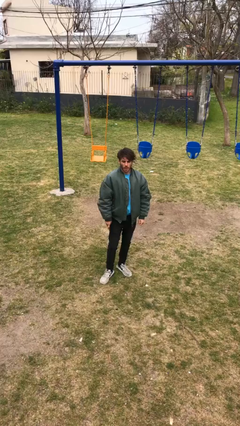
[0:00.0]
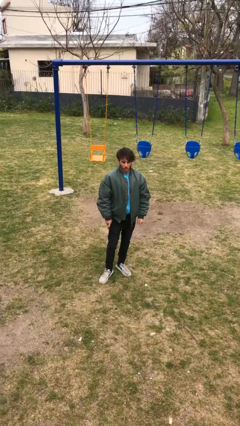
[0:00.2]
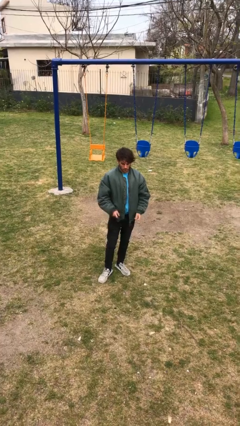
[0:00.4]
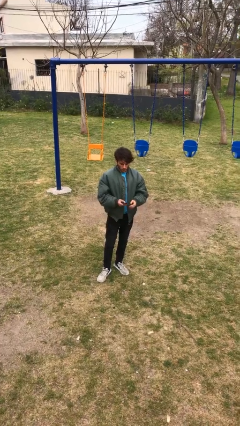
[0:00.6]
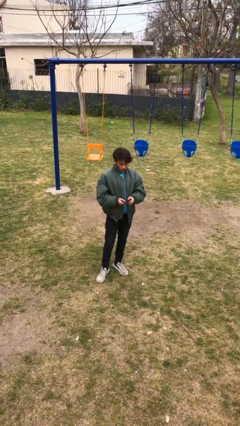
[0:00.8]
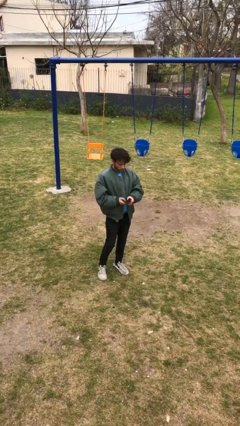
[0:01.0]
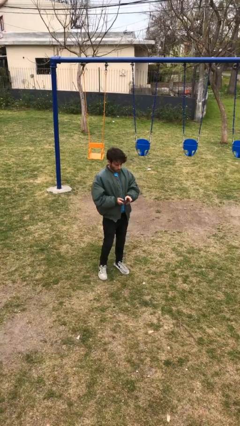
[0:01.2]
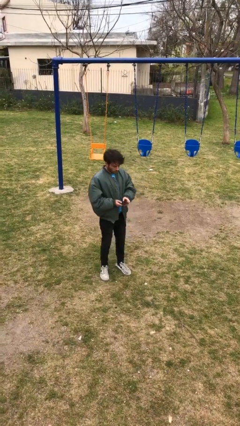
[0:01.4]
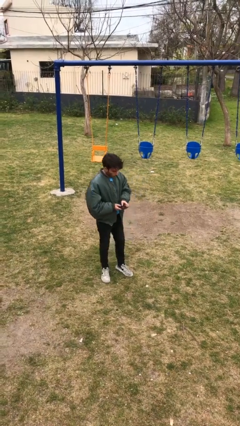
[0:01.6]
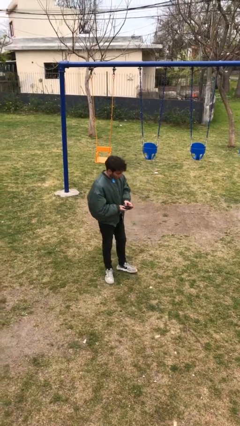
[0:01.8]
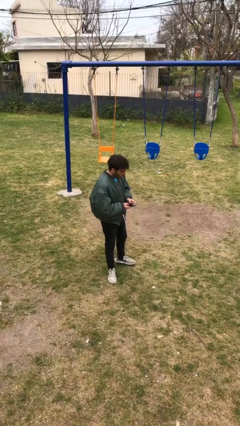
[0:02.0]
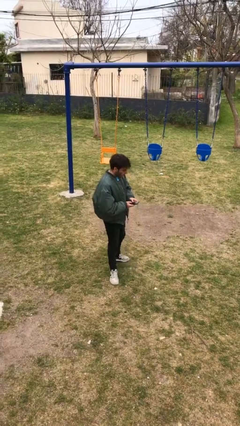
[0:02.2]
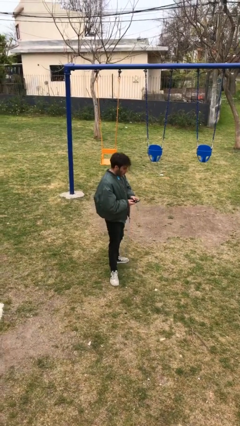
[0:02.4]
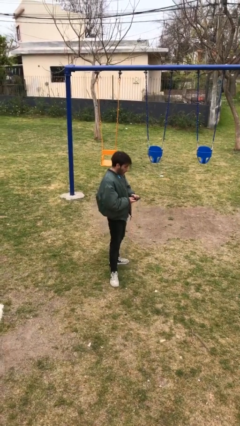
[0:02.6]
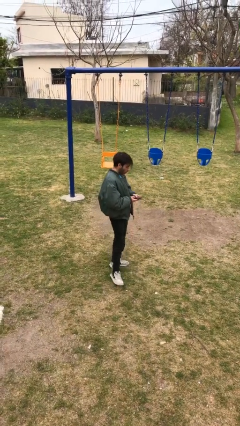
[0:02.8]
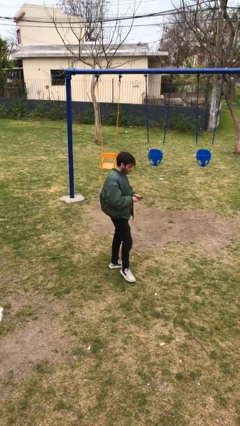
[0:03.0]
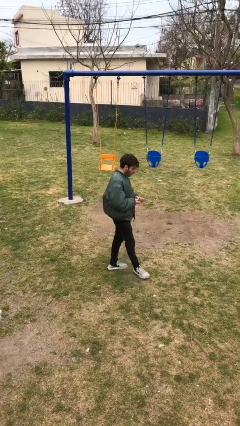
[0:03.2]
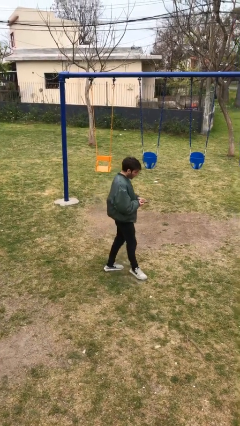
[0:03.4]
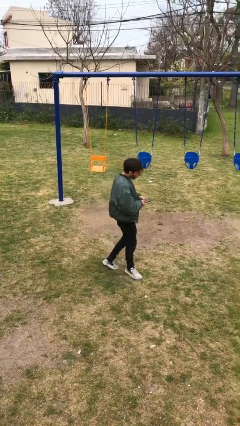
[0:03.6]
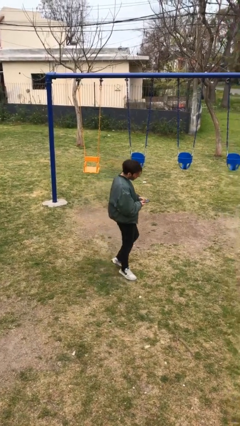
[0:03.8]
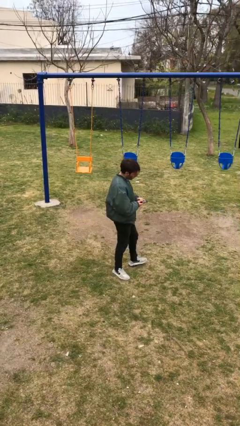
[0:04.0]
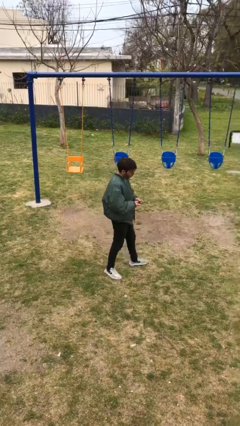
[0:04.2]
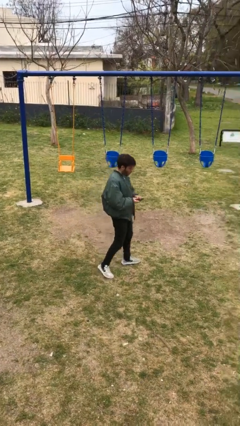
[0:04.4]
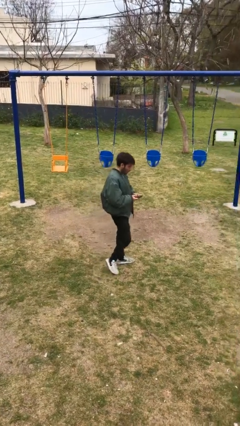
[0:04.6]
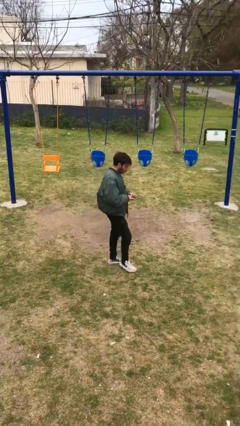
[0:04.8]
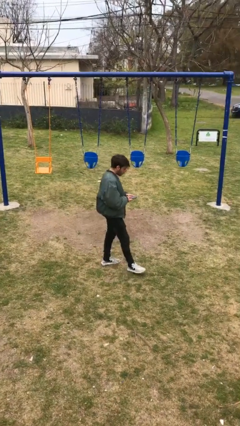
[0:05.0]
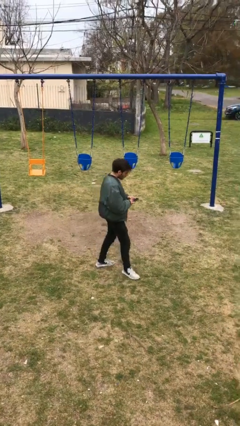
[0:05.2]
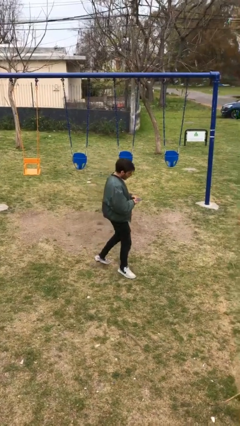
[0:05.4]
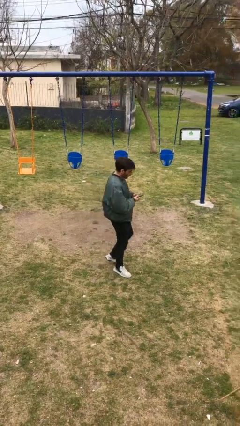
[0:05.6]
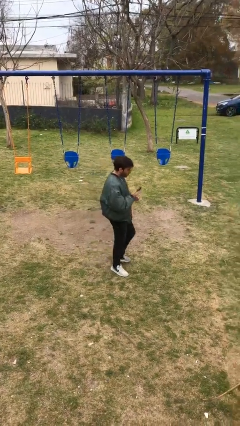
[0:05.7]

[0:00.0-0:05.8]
person texts on phone

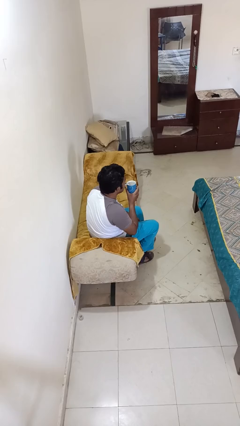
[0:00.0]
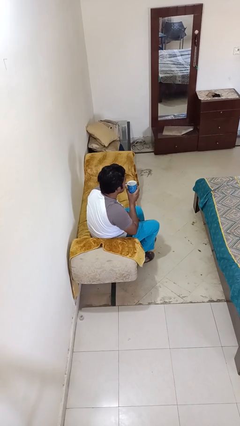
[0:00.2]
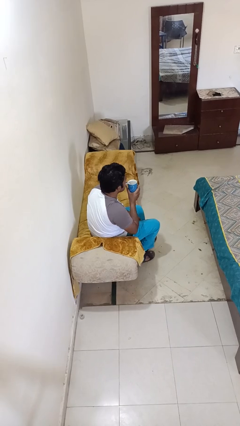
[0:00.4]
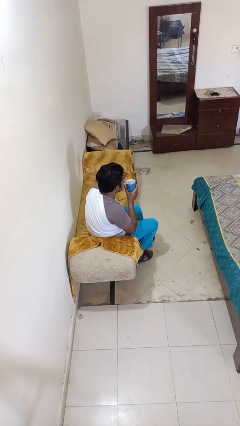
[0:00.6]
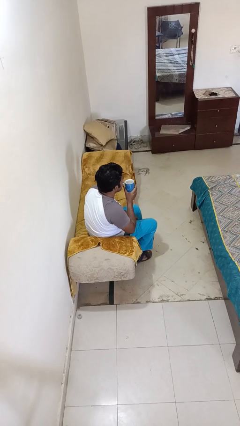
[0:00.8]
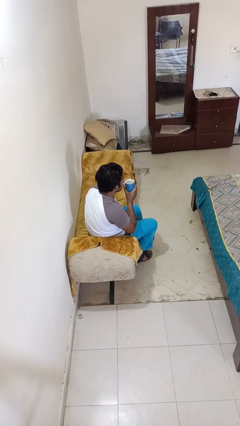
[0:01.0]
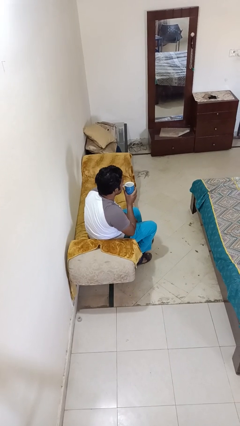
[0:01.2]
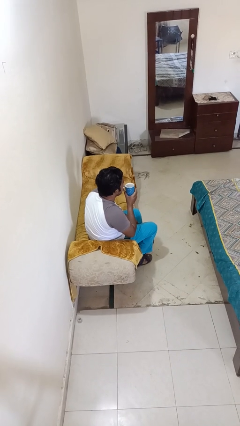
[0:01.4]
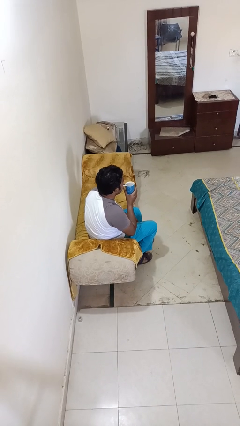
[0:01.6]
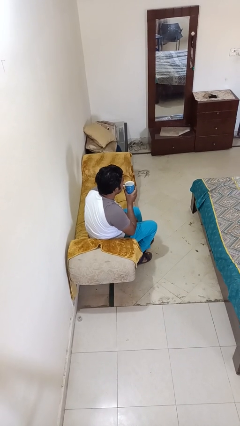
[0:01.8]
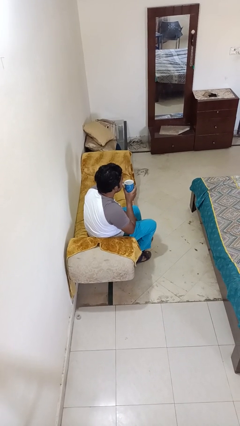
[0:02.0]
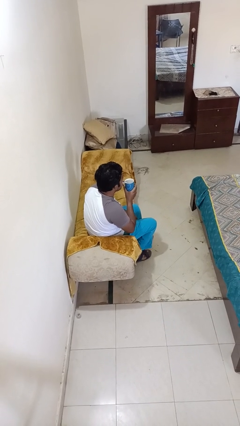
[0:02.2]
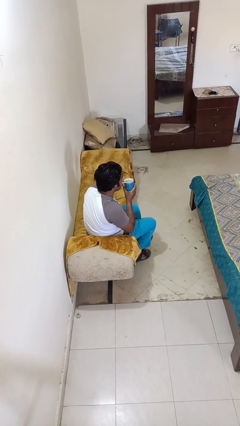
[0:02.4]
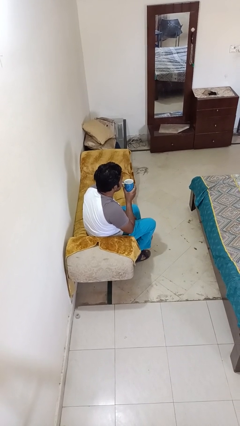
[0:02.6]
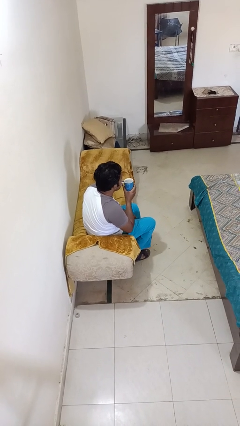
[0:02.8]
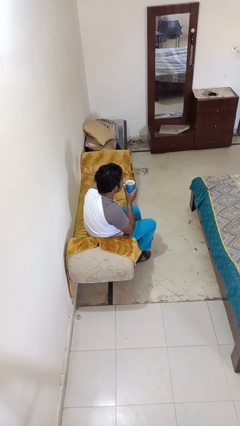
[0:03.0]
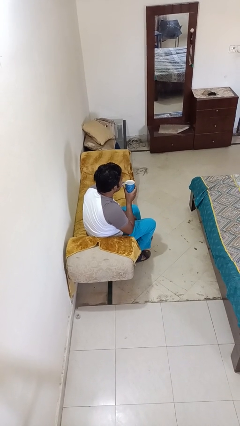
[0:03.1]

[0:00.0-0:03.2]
person drinks from straw

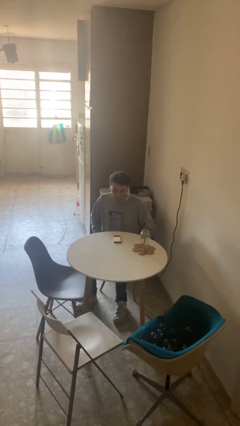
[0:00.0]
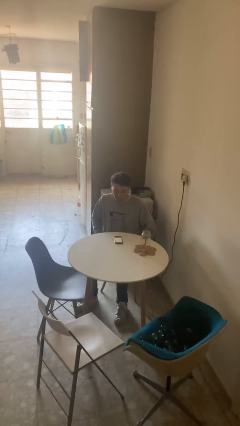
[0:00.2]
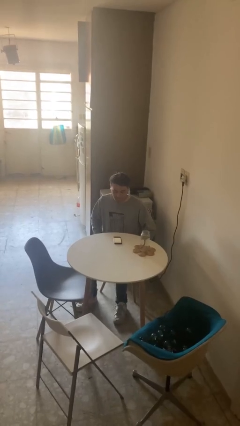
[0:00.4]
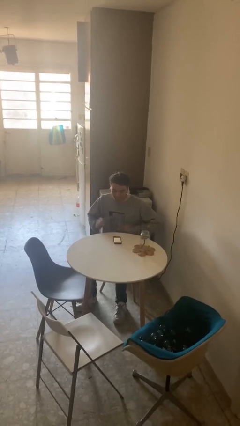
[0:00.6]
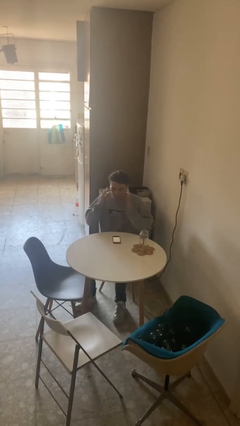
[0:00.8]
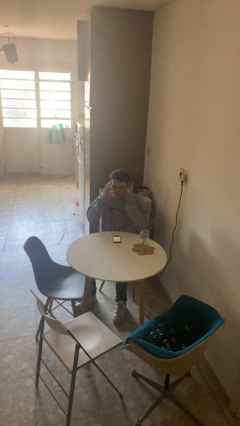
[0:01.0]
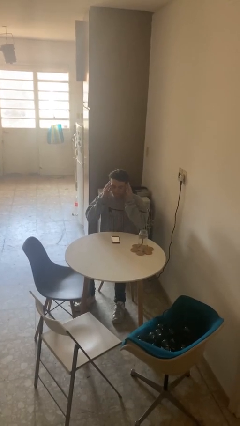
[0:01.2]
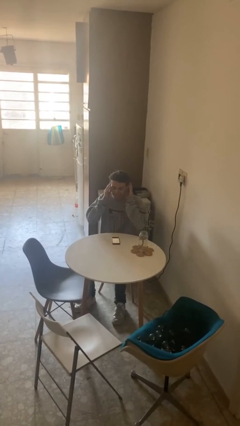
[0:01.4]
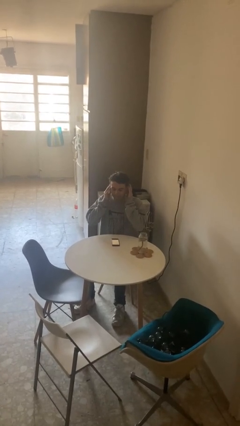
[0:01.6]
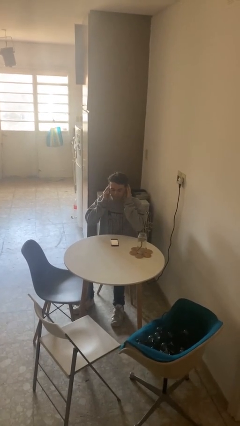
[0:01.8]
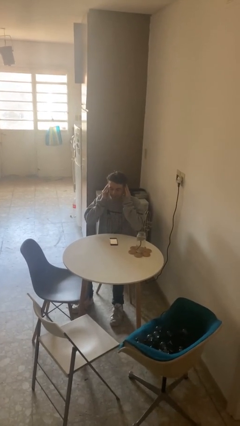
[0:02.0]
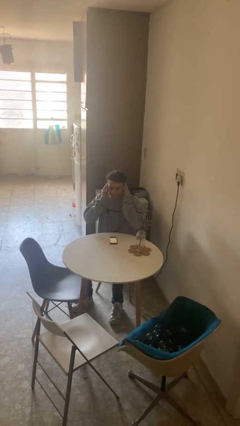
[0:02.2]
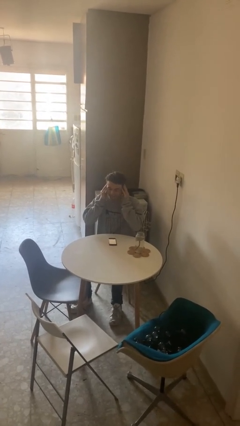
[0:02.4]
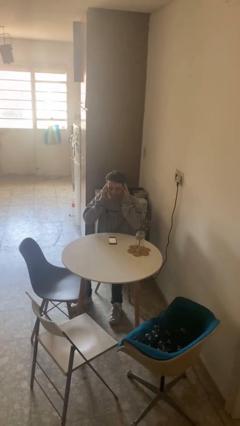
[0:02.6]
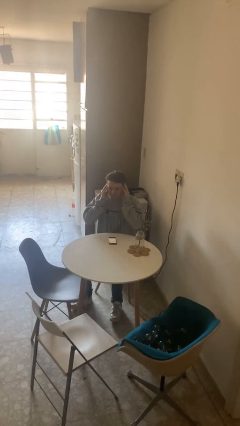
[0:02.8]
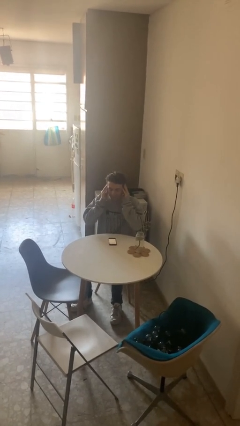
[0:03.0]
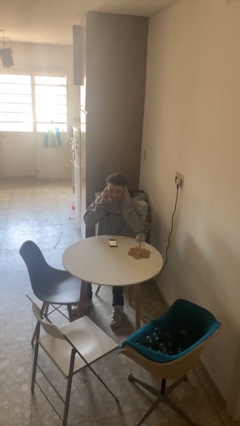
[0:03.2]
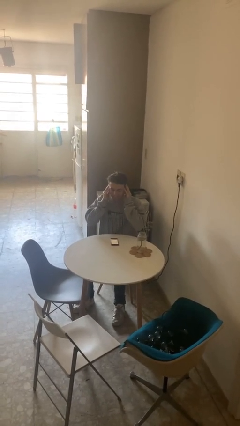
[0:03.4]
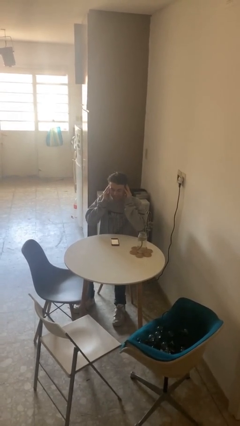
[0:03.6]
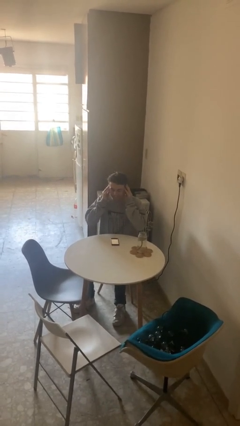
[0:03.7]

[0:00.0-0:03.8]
person puts fingers in ear

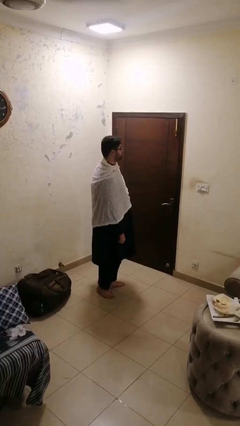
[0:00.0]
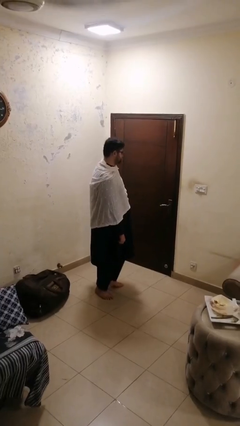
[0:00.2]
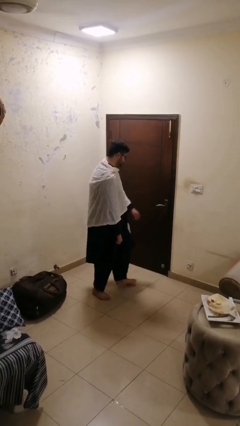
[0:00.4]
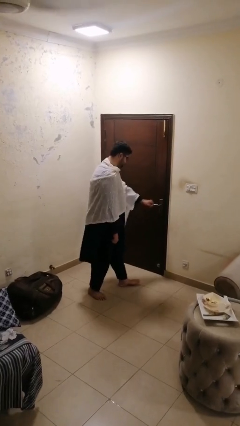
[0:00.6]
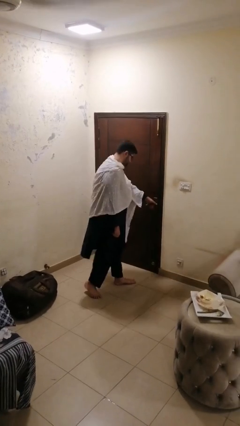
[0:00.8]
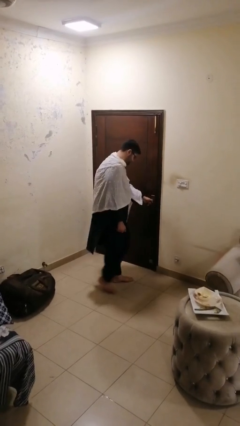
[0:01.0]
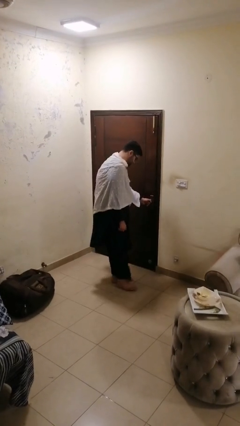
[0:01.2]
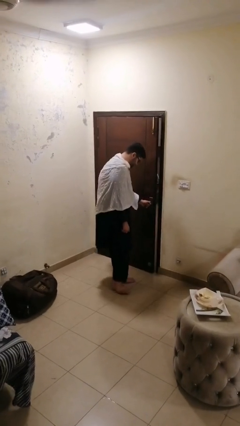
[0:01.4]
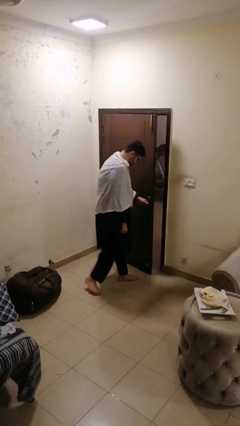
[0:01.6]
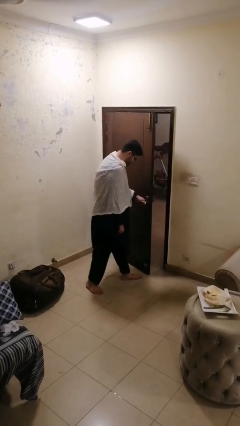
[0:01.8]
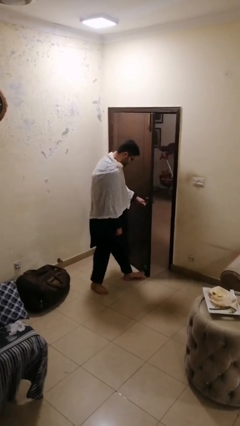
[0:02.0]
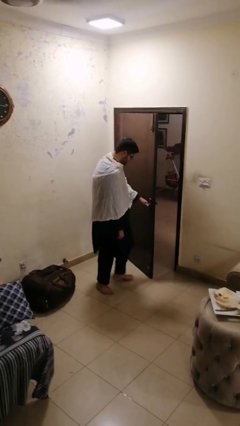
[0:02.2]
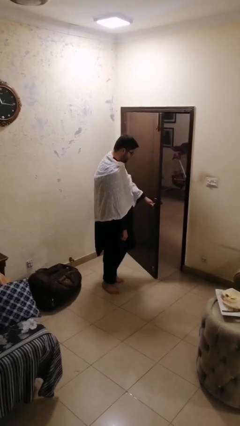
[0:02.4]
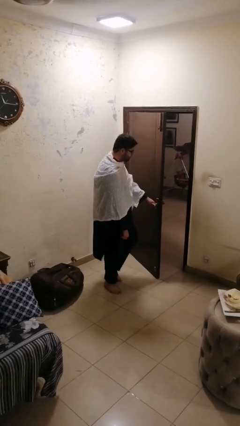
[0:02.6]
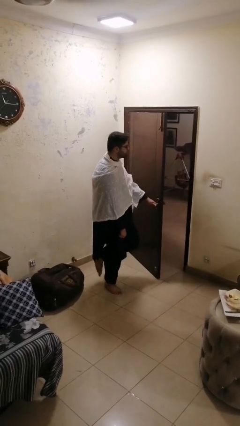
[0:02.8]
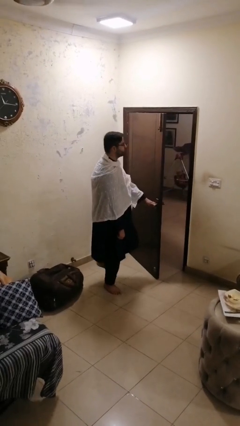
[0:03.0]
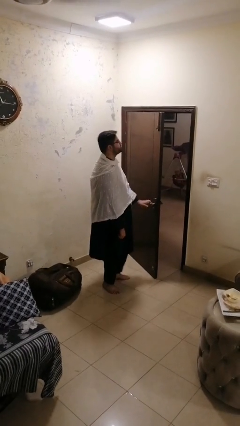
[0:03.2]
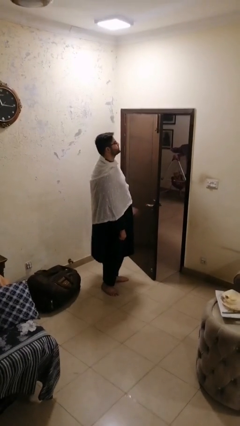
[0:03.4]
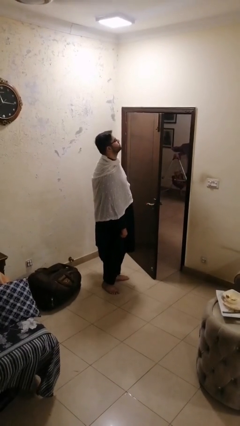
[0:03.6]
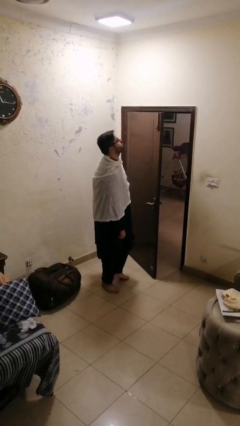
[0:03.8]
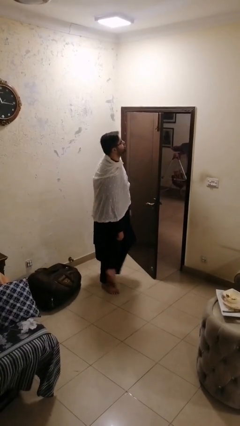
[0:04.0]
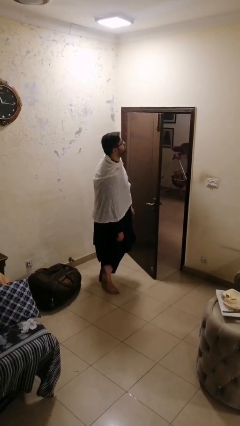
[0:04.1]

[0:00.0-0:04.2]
person opens facility door

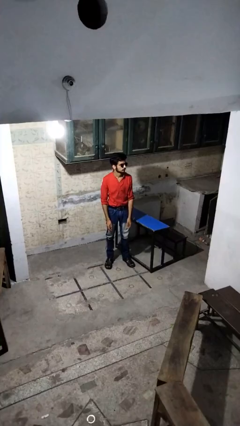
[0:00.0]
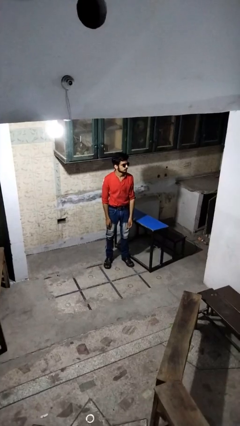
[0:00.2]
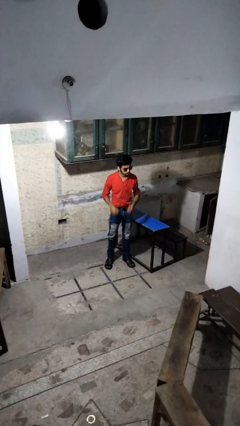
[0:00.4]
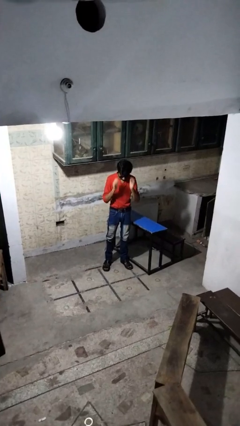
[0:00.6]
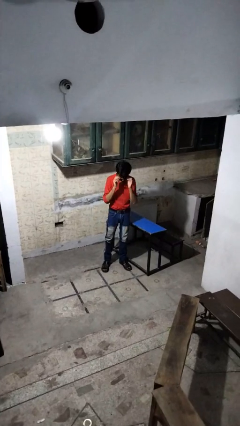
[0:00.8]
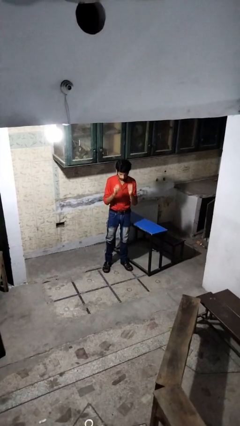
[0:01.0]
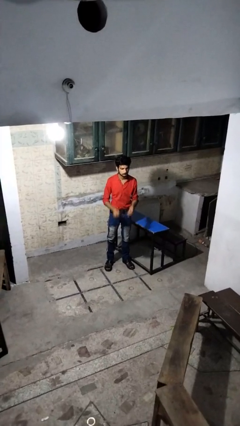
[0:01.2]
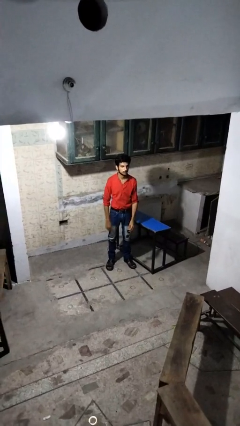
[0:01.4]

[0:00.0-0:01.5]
person takes off sunglasses
